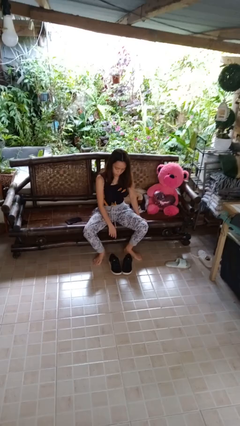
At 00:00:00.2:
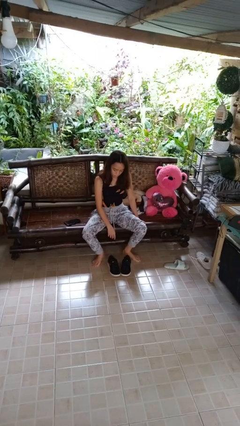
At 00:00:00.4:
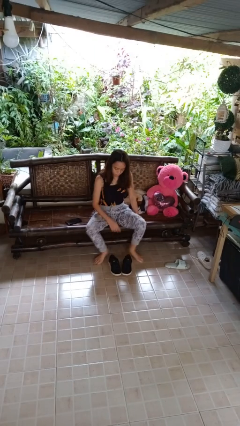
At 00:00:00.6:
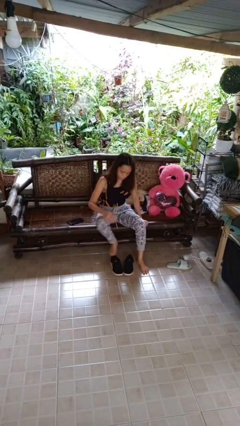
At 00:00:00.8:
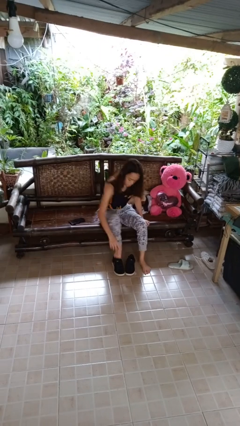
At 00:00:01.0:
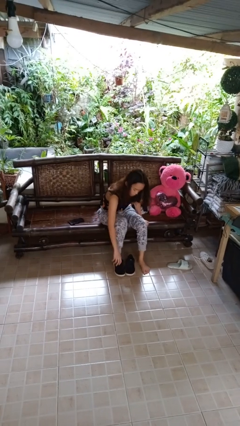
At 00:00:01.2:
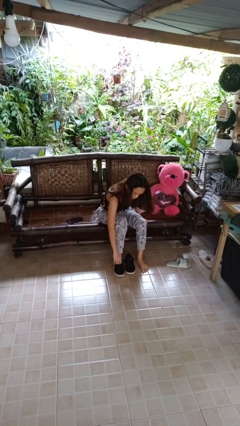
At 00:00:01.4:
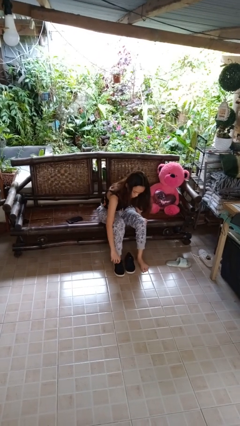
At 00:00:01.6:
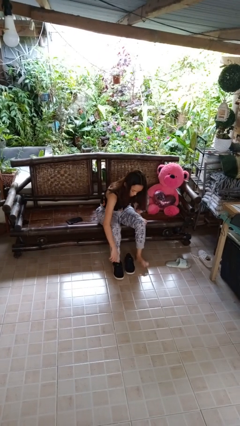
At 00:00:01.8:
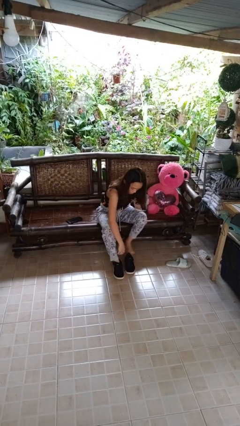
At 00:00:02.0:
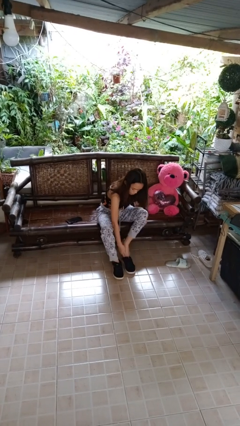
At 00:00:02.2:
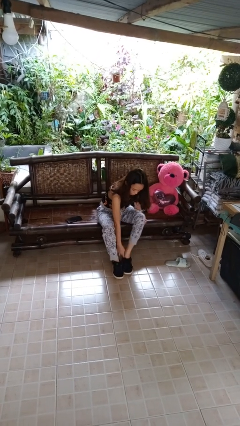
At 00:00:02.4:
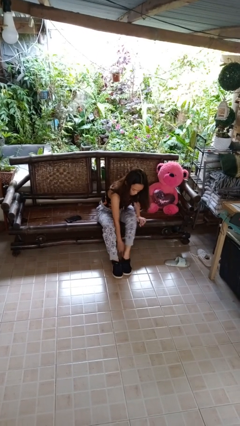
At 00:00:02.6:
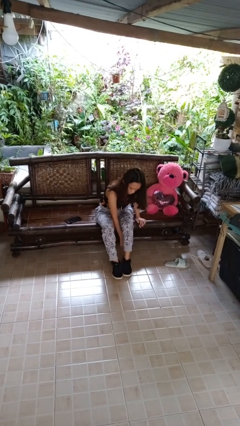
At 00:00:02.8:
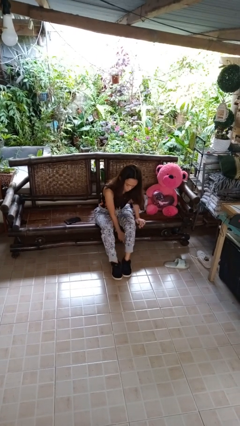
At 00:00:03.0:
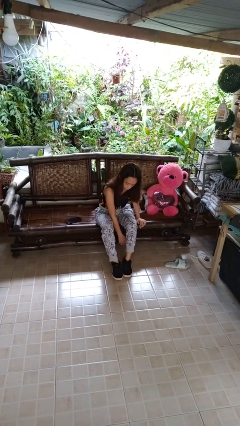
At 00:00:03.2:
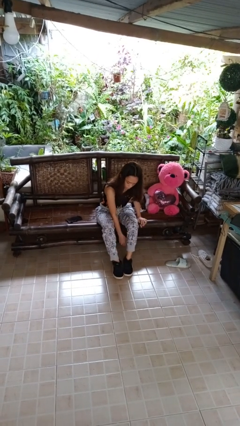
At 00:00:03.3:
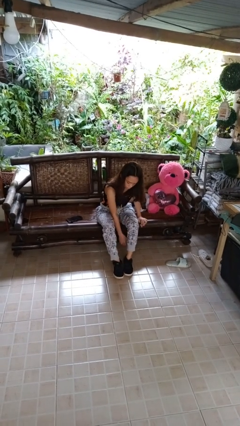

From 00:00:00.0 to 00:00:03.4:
person puts on shoes

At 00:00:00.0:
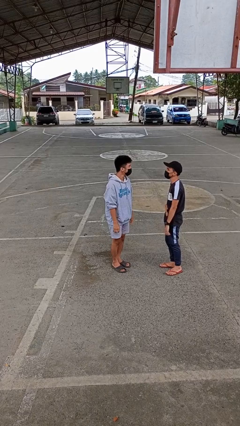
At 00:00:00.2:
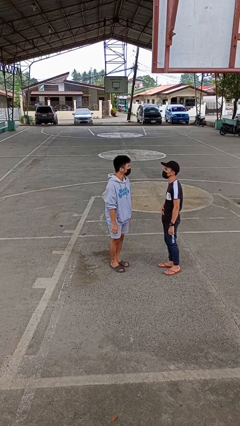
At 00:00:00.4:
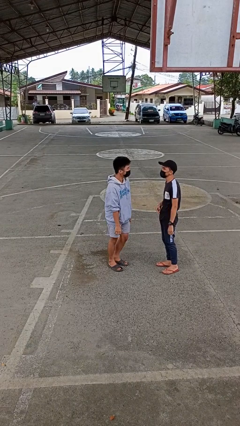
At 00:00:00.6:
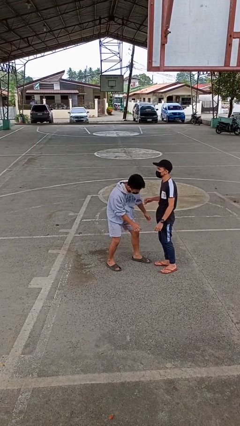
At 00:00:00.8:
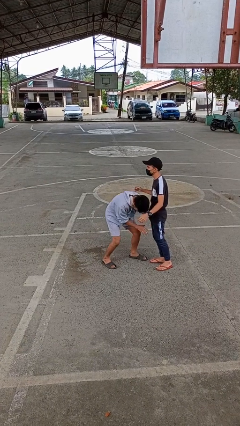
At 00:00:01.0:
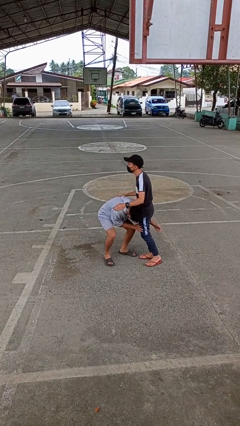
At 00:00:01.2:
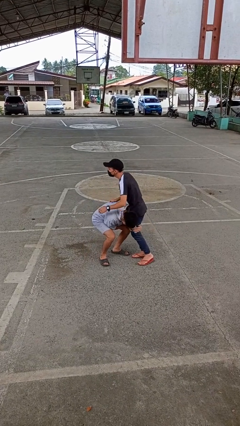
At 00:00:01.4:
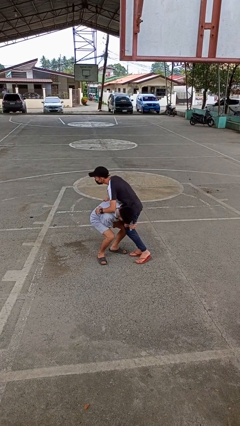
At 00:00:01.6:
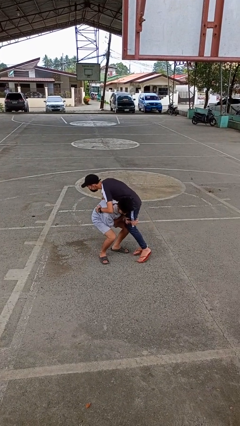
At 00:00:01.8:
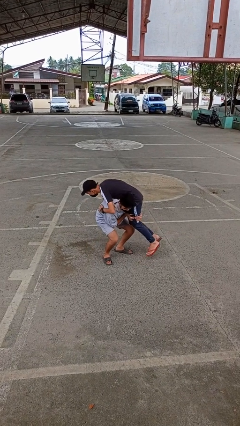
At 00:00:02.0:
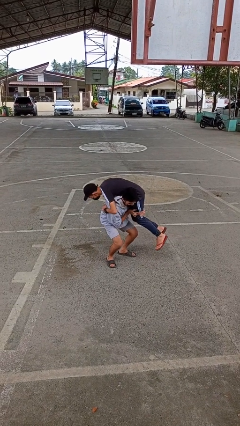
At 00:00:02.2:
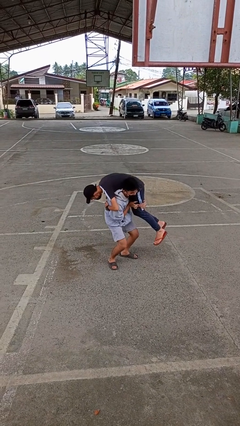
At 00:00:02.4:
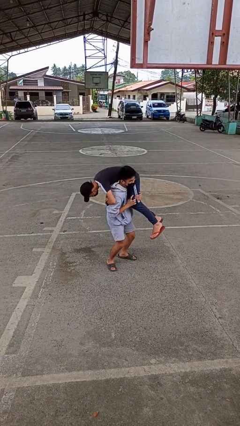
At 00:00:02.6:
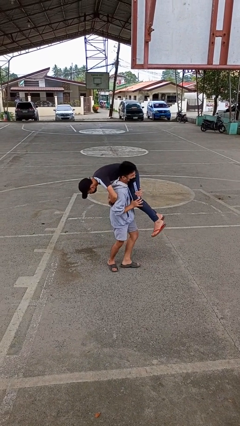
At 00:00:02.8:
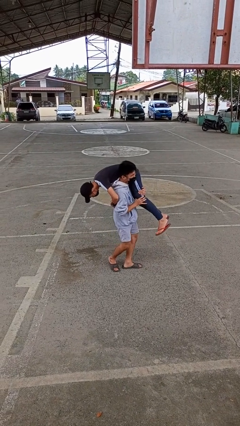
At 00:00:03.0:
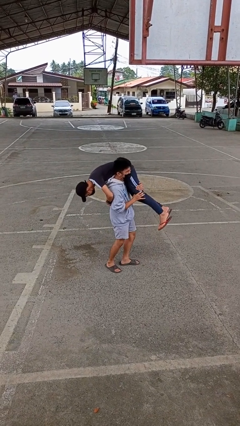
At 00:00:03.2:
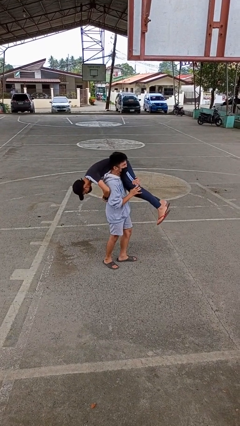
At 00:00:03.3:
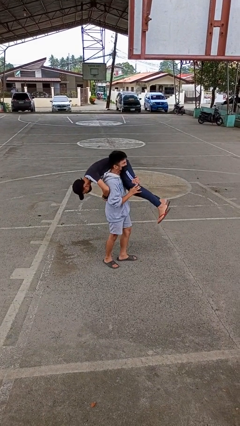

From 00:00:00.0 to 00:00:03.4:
person carries person over shoulder

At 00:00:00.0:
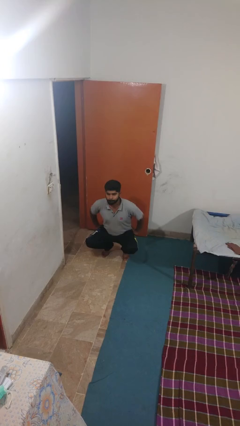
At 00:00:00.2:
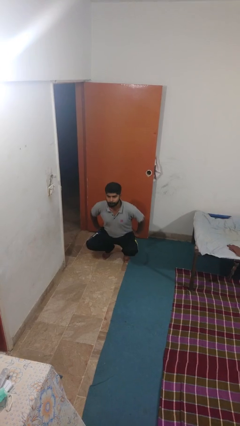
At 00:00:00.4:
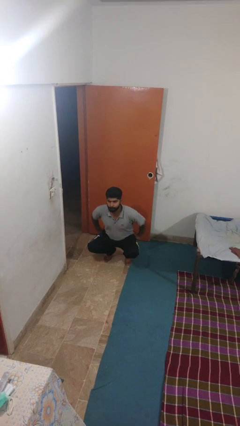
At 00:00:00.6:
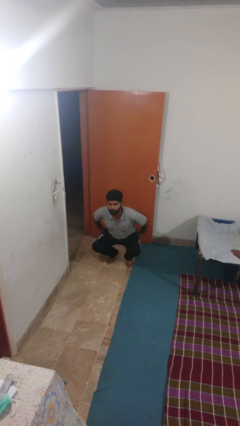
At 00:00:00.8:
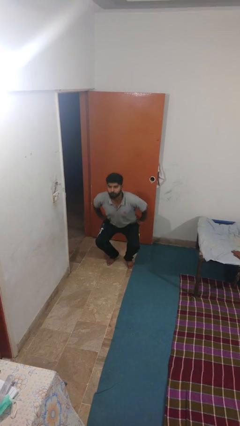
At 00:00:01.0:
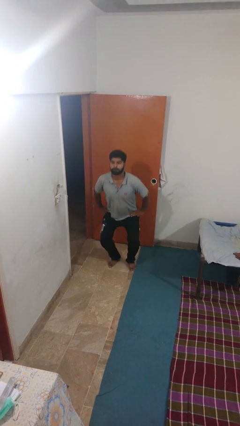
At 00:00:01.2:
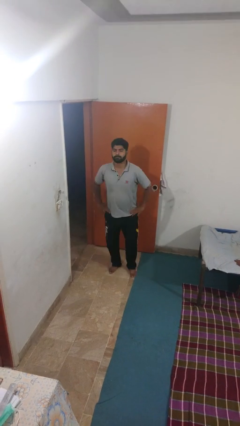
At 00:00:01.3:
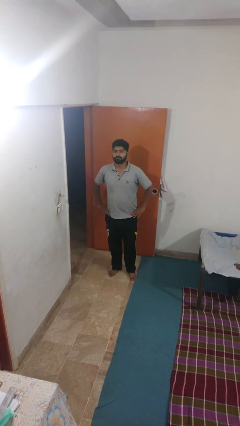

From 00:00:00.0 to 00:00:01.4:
person stands up

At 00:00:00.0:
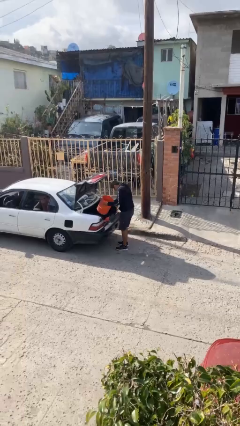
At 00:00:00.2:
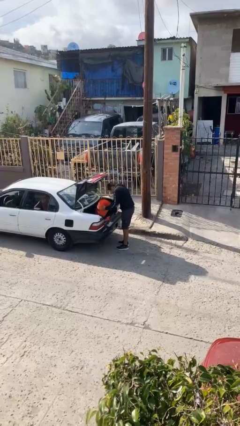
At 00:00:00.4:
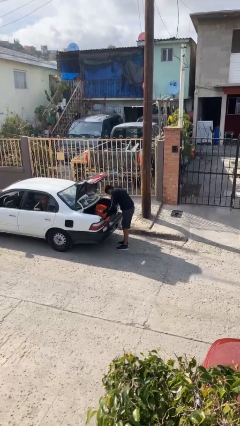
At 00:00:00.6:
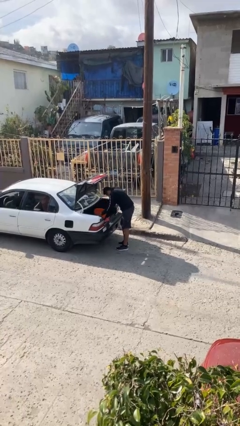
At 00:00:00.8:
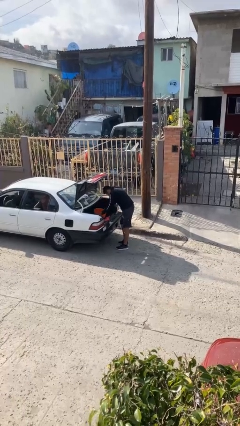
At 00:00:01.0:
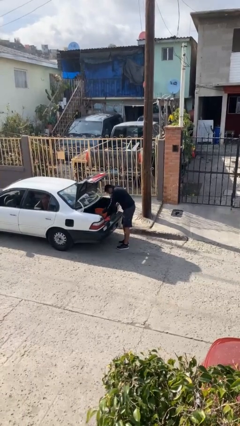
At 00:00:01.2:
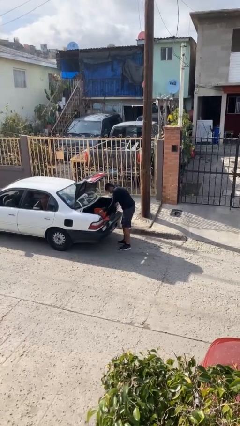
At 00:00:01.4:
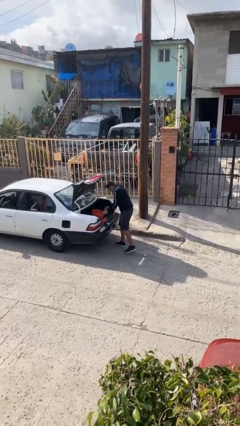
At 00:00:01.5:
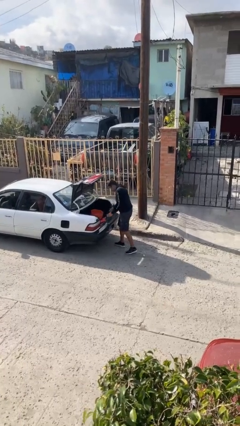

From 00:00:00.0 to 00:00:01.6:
person loads car

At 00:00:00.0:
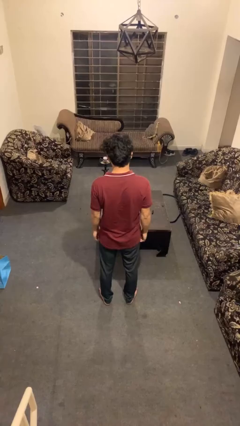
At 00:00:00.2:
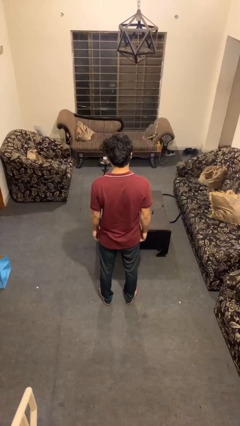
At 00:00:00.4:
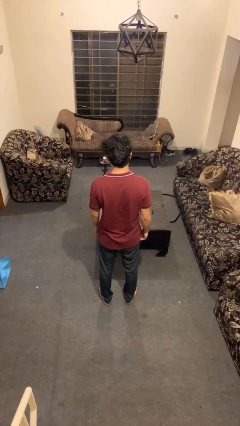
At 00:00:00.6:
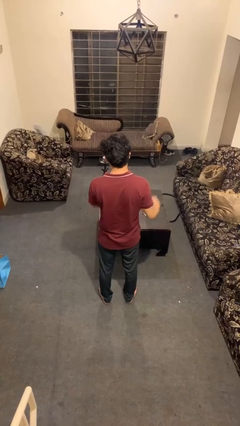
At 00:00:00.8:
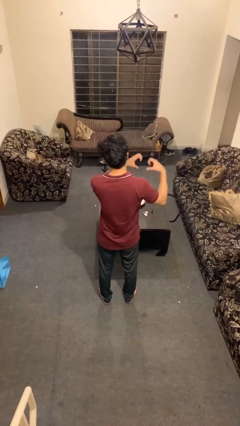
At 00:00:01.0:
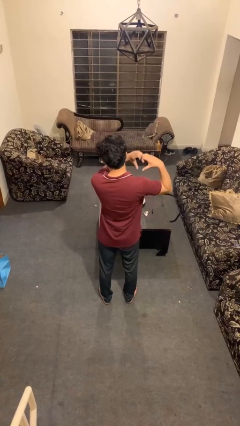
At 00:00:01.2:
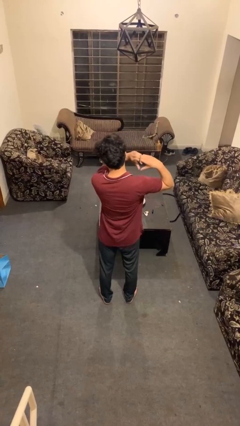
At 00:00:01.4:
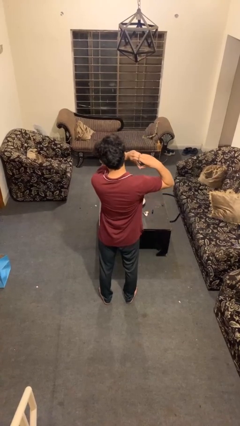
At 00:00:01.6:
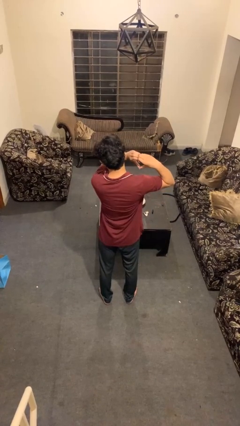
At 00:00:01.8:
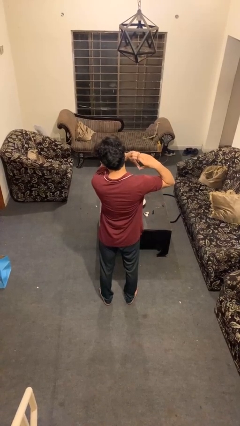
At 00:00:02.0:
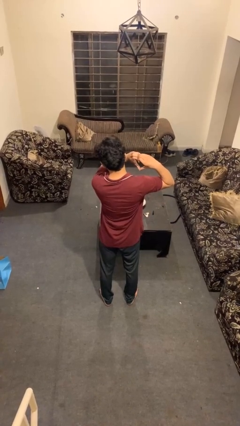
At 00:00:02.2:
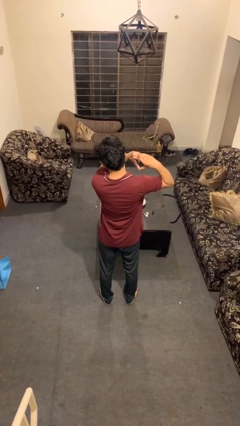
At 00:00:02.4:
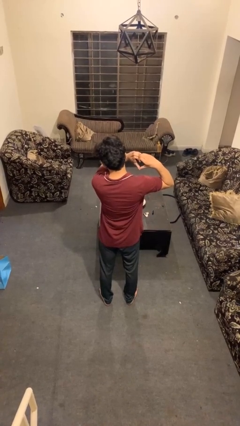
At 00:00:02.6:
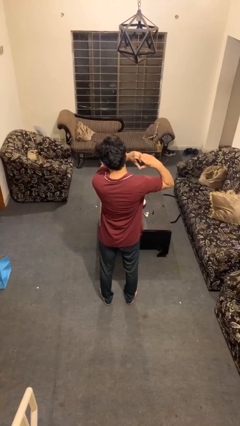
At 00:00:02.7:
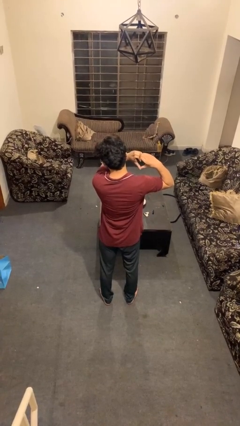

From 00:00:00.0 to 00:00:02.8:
person gestures heart

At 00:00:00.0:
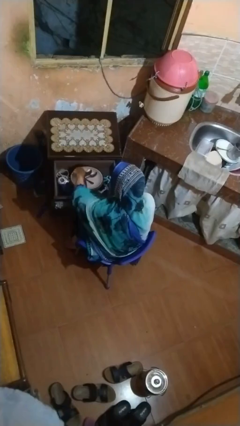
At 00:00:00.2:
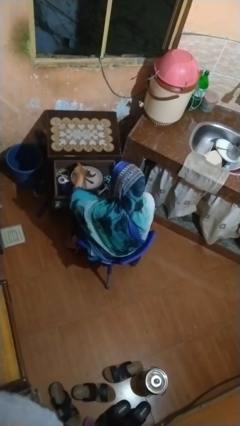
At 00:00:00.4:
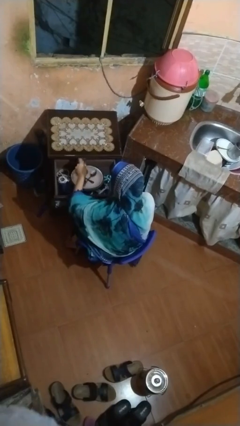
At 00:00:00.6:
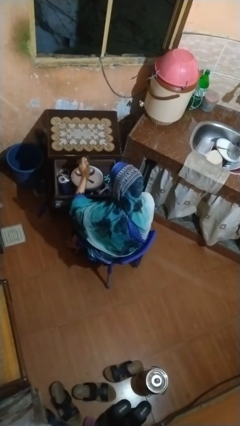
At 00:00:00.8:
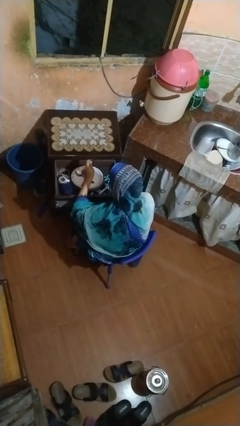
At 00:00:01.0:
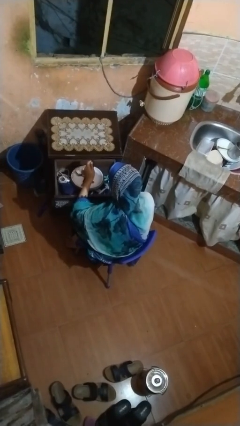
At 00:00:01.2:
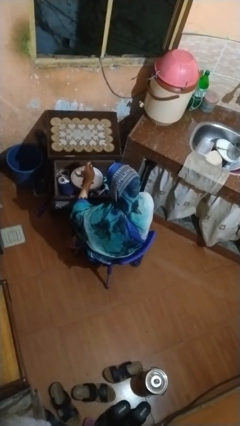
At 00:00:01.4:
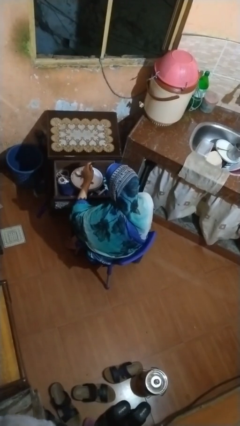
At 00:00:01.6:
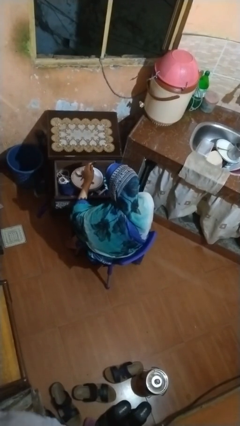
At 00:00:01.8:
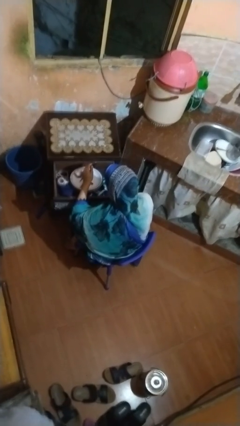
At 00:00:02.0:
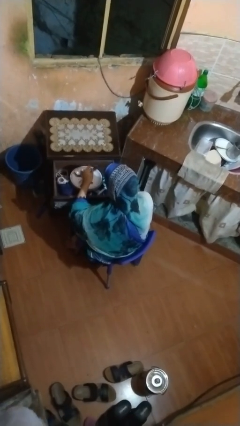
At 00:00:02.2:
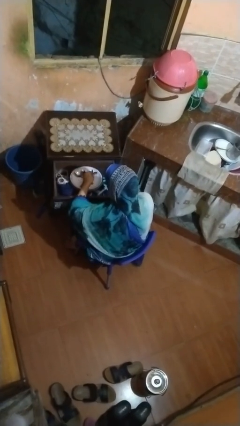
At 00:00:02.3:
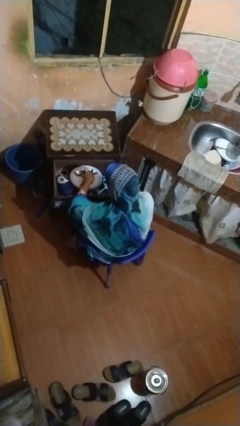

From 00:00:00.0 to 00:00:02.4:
person takes object from kitchen drawer

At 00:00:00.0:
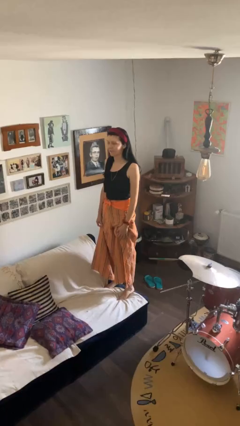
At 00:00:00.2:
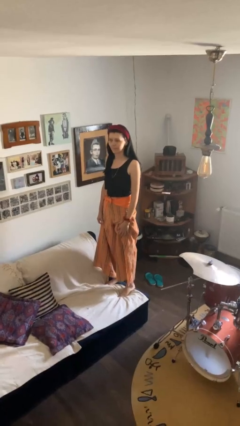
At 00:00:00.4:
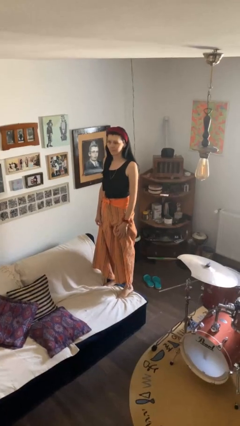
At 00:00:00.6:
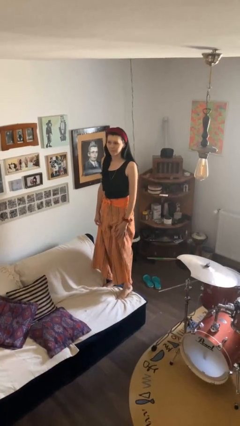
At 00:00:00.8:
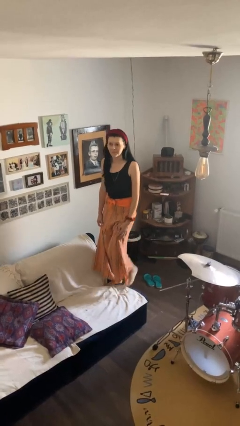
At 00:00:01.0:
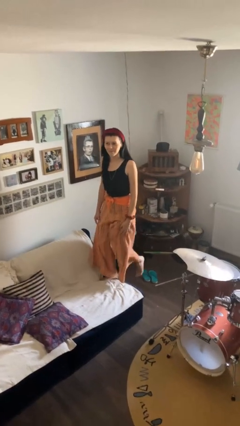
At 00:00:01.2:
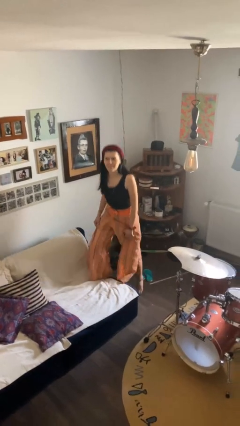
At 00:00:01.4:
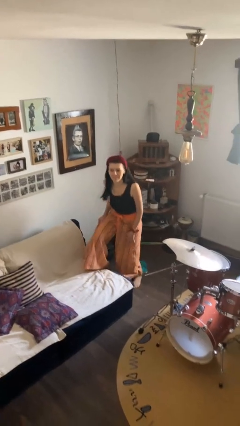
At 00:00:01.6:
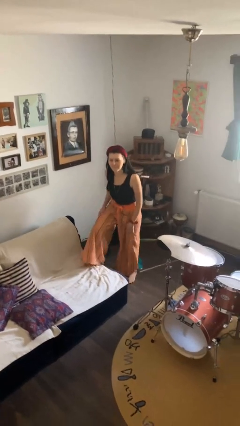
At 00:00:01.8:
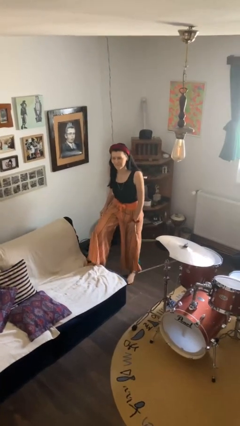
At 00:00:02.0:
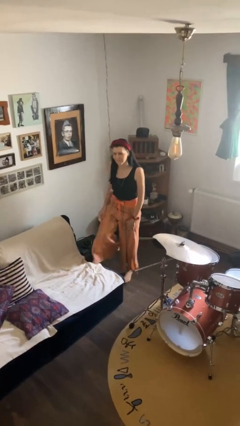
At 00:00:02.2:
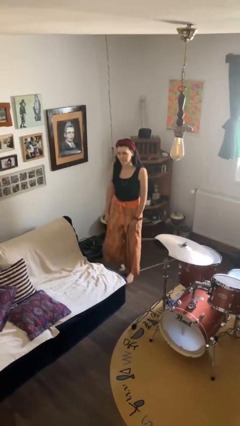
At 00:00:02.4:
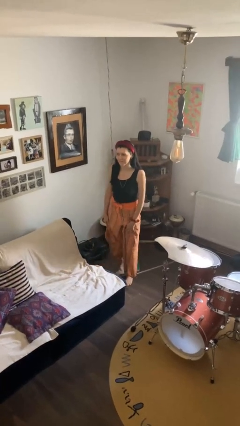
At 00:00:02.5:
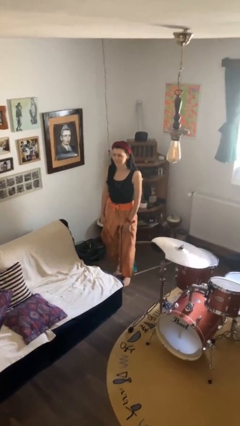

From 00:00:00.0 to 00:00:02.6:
person climbs off couch
